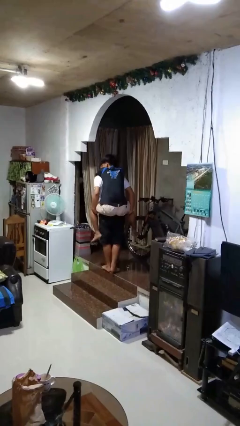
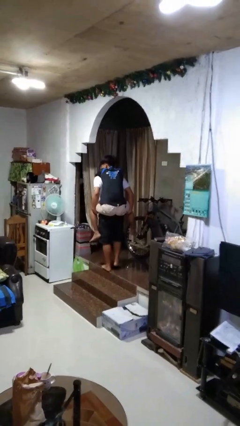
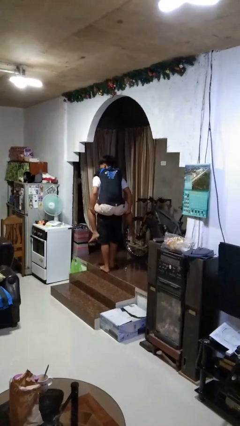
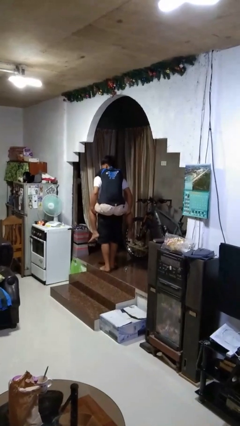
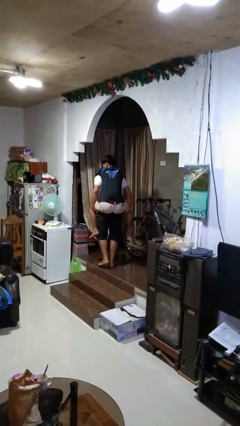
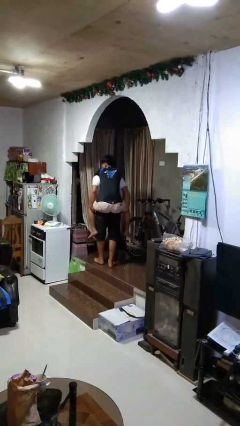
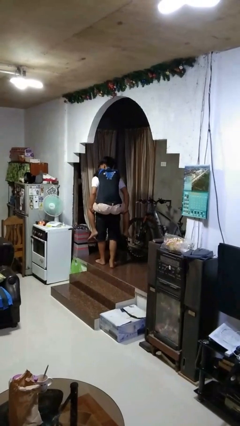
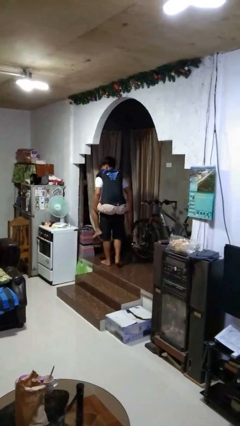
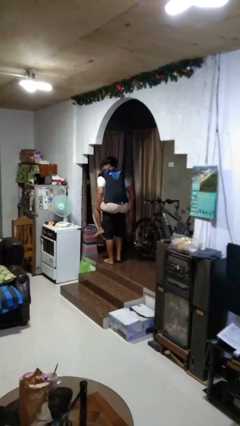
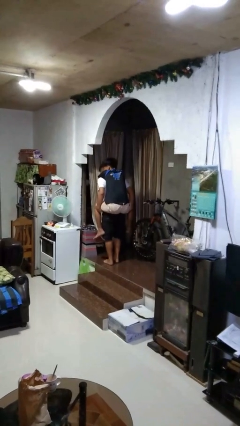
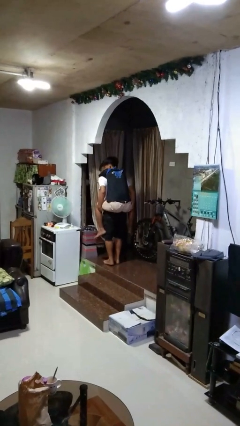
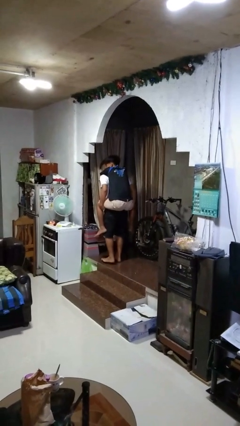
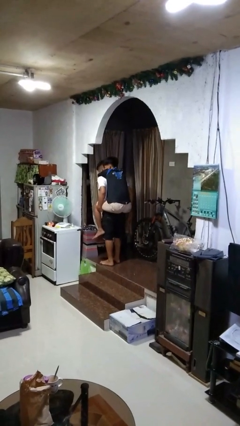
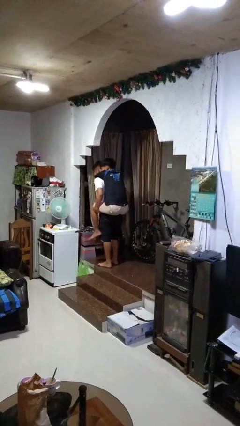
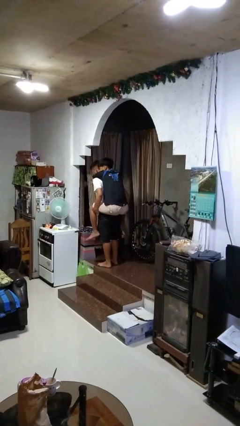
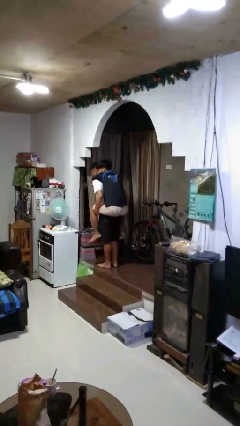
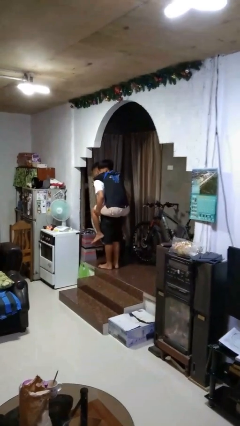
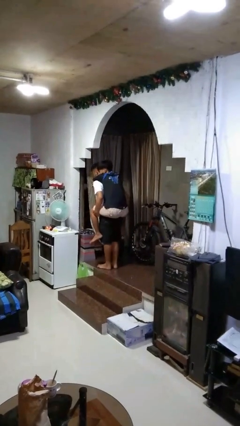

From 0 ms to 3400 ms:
person carries person on back

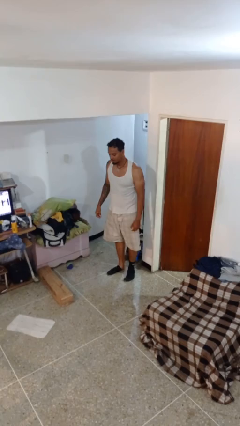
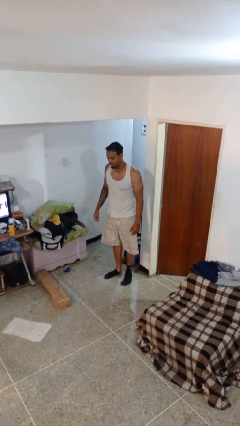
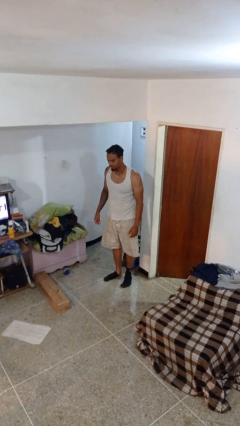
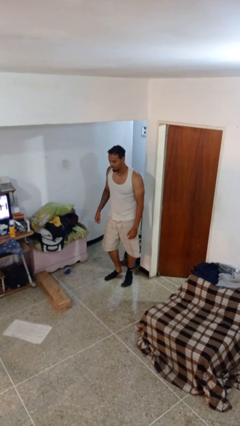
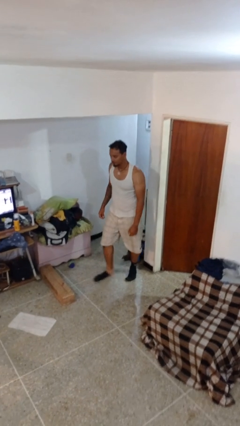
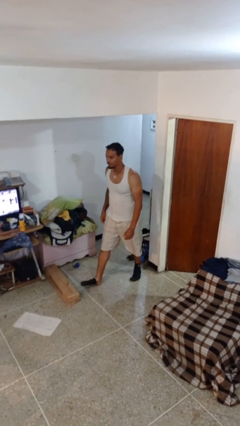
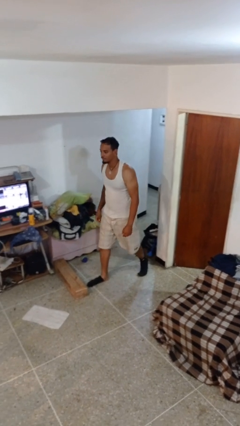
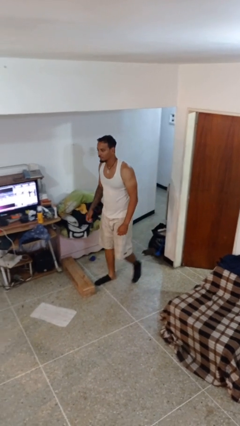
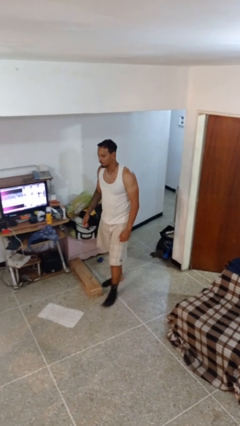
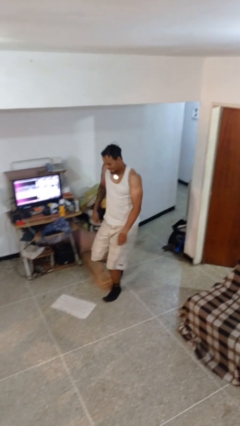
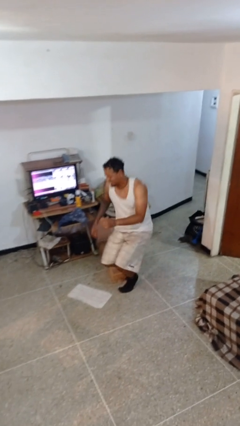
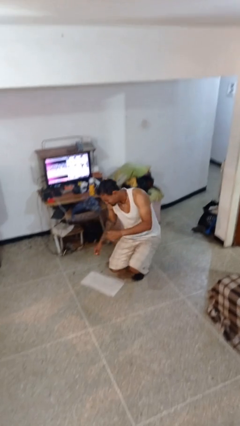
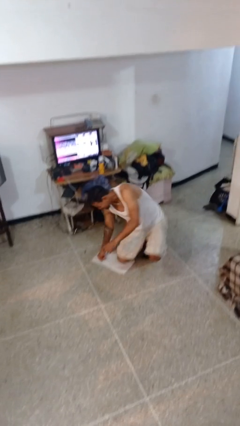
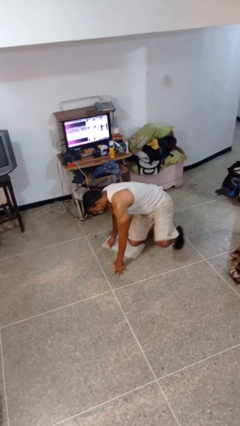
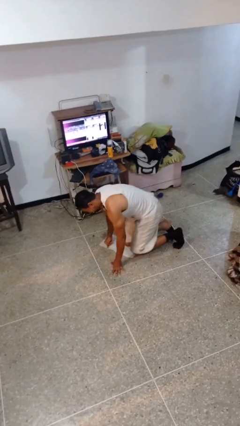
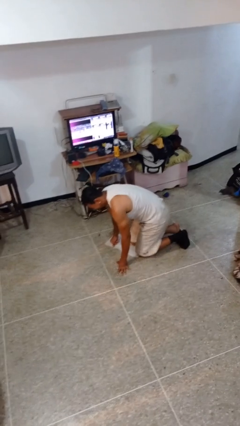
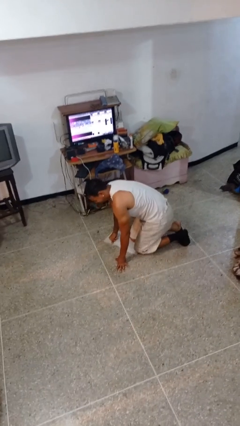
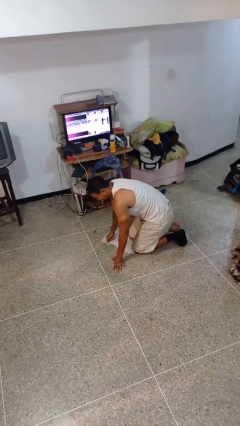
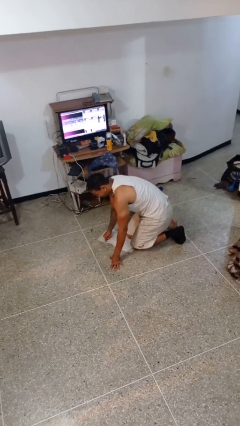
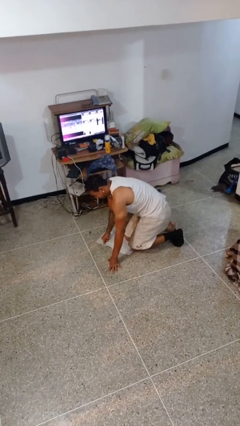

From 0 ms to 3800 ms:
person trips on object on floor

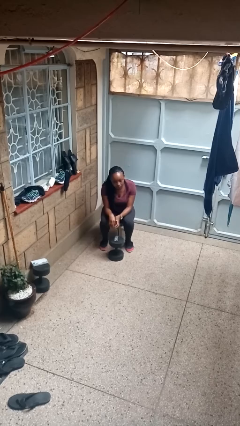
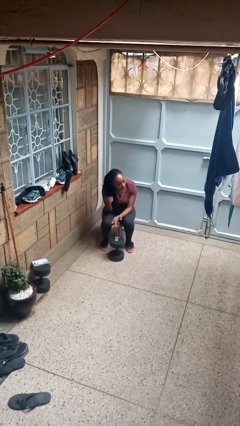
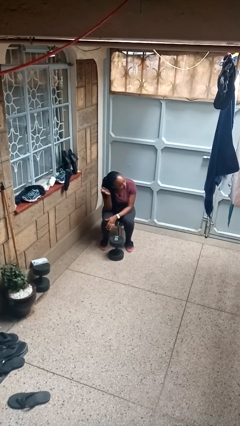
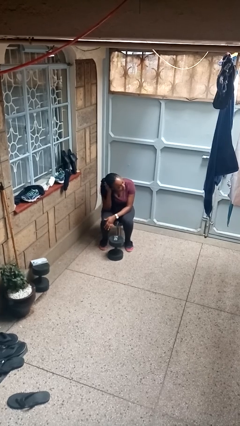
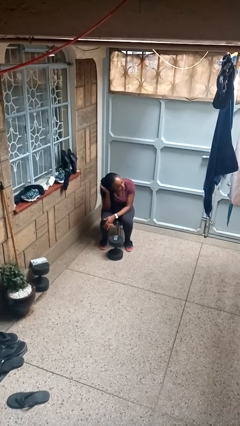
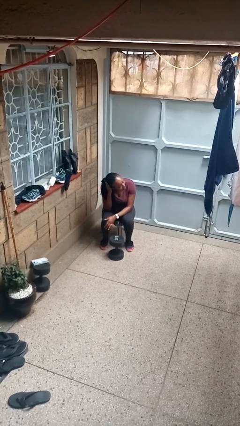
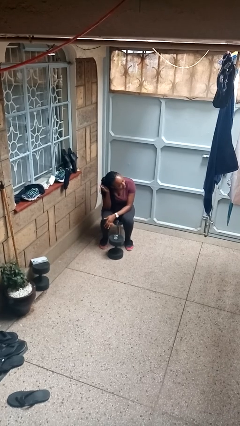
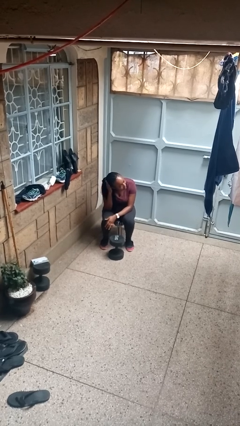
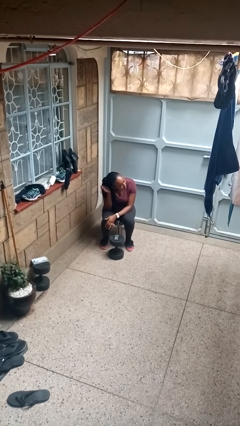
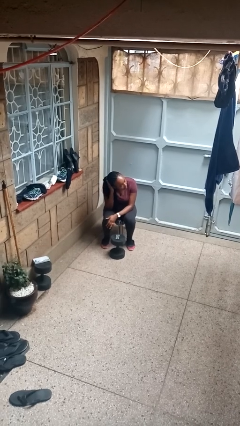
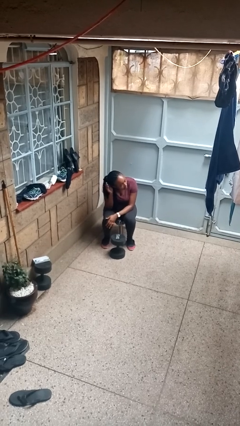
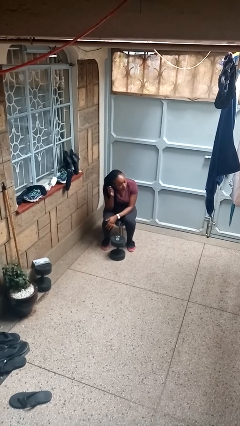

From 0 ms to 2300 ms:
person pats head

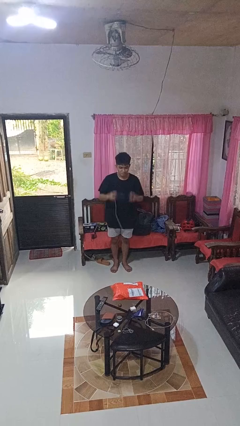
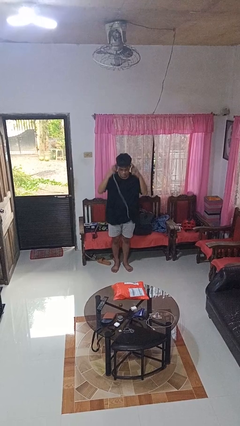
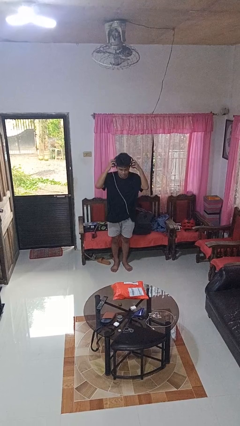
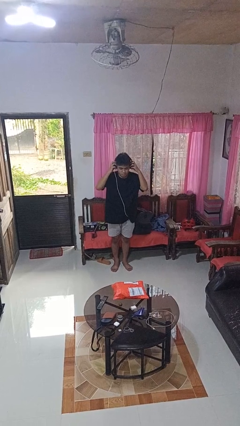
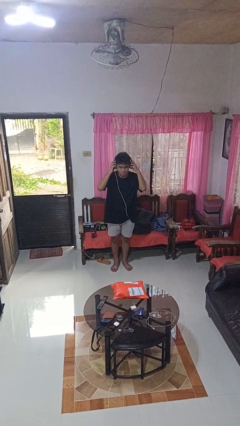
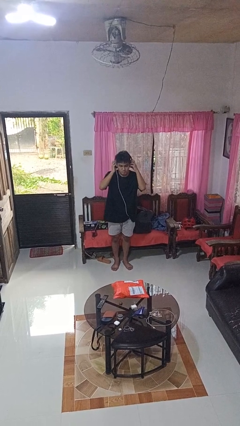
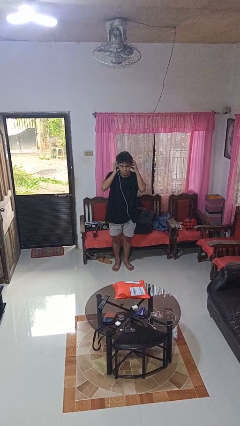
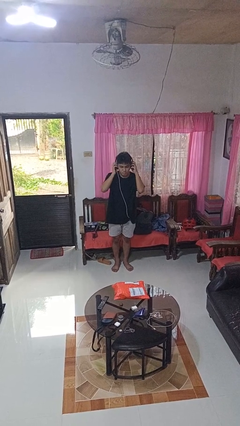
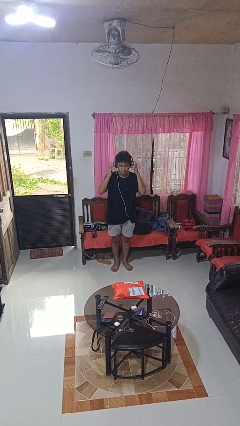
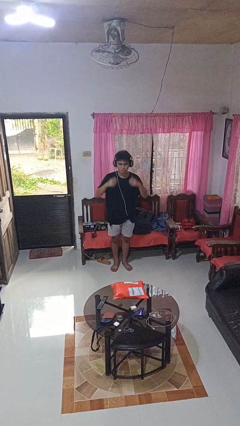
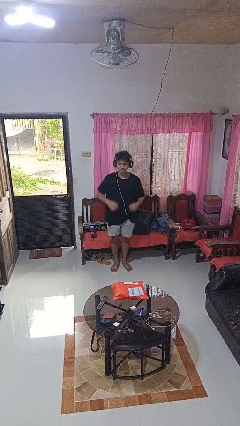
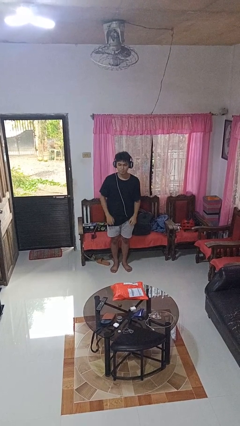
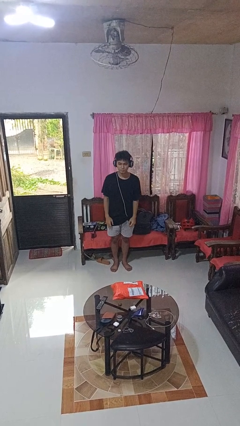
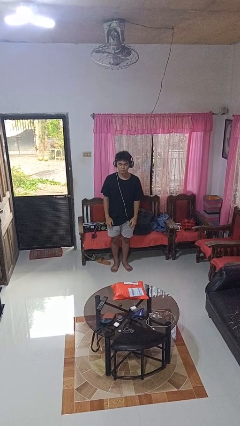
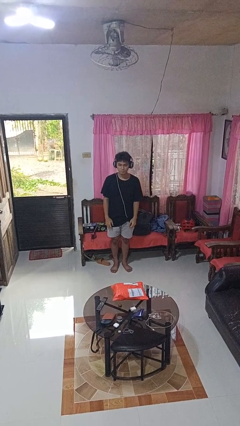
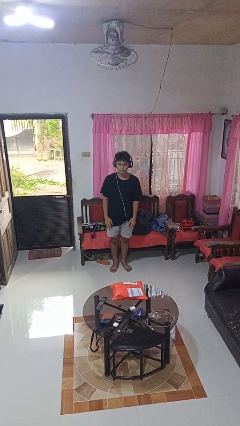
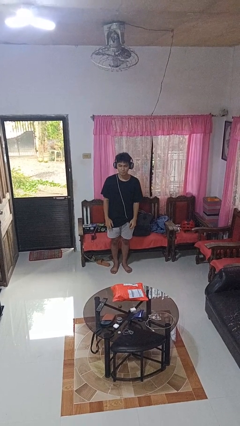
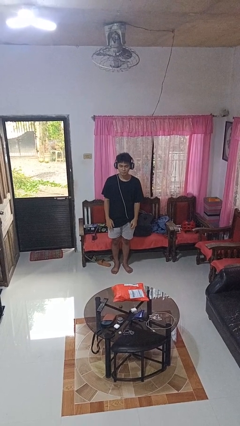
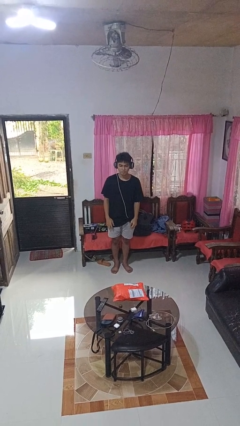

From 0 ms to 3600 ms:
person puts on headphones

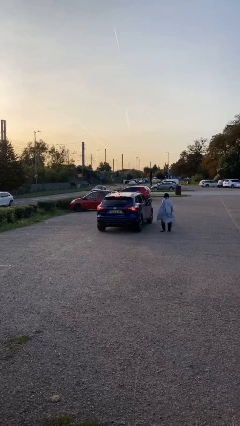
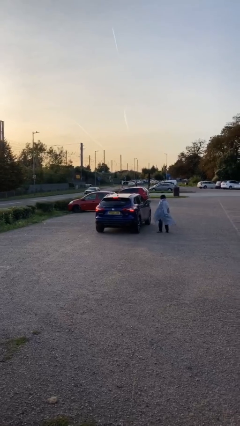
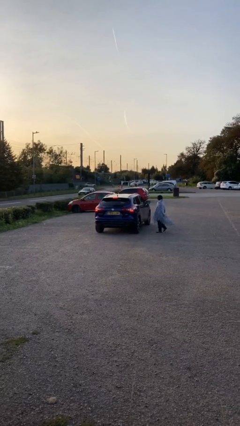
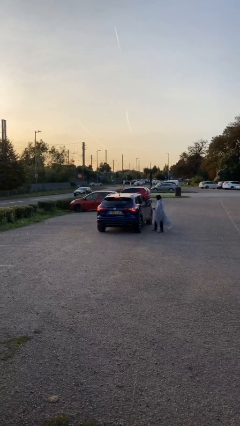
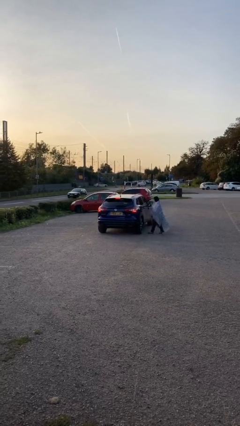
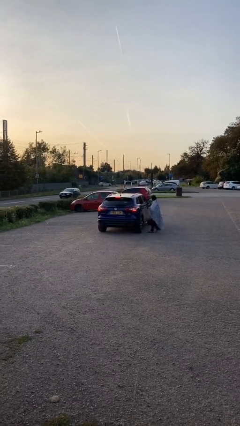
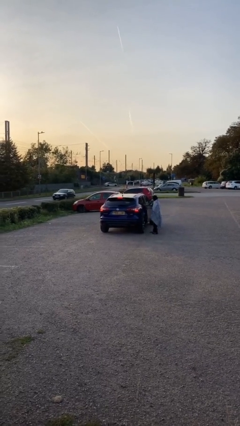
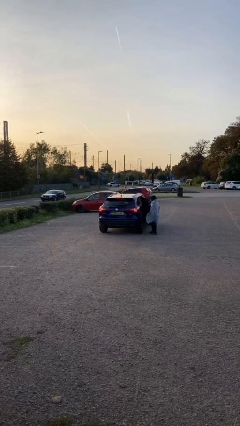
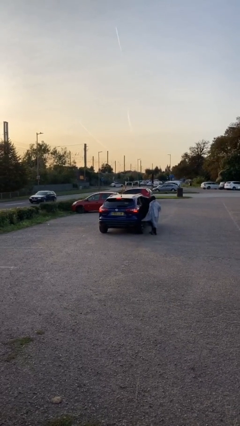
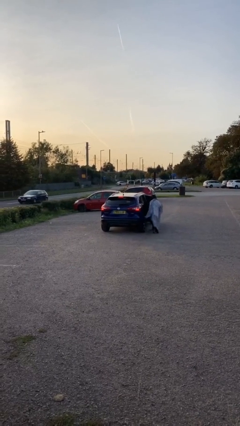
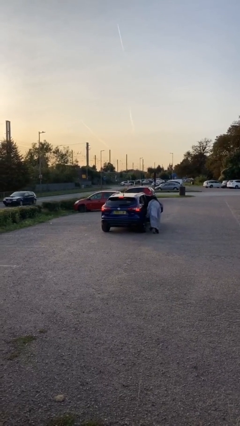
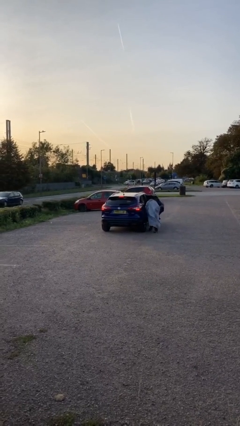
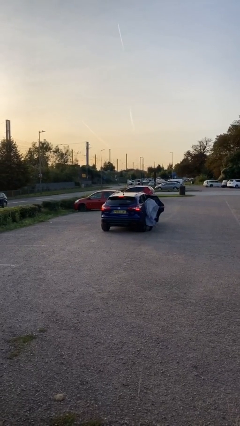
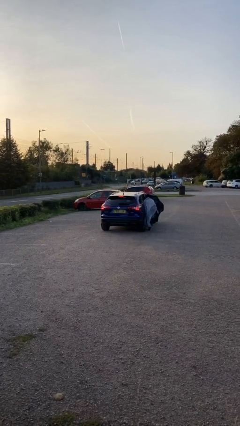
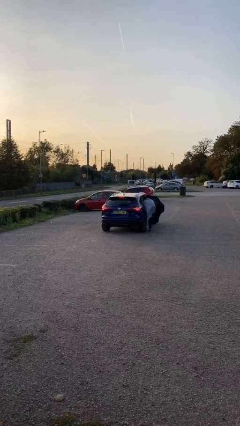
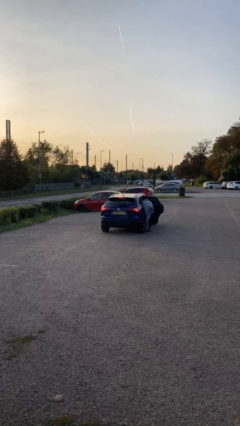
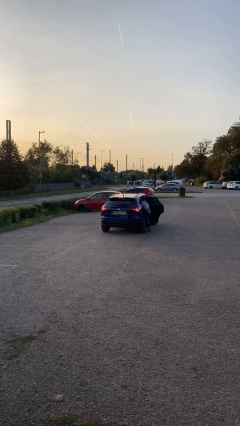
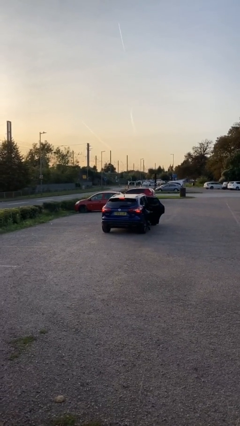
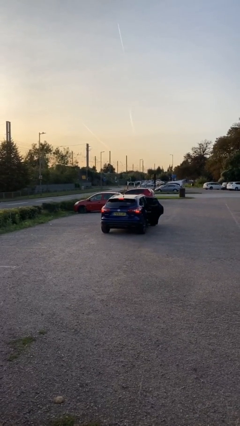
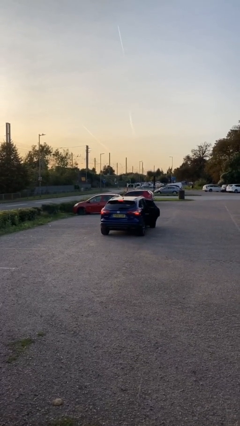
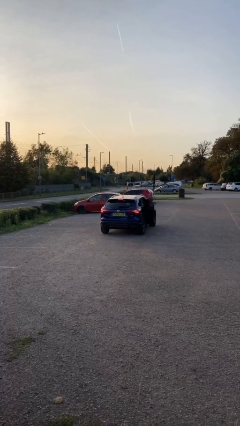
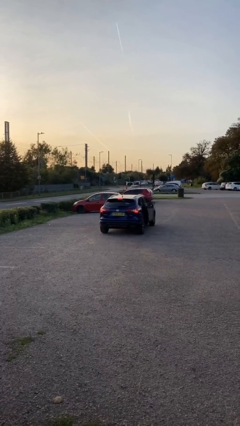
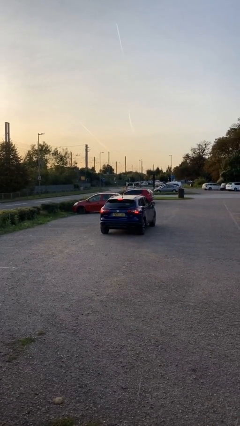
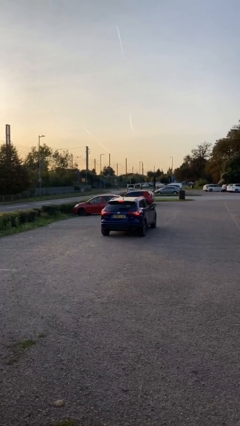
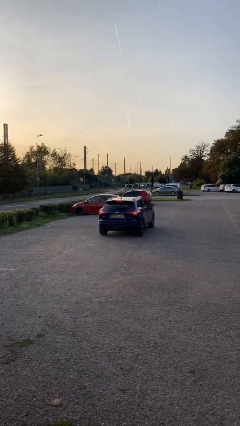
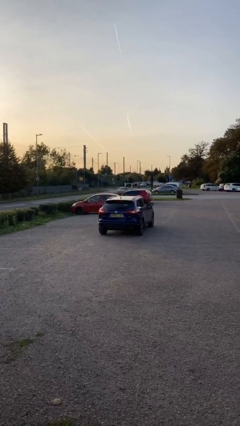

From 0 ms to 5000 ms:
car picks up person
